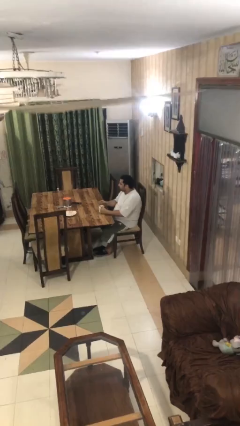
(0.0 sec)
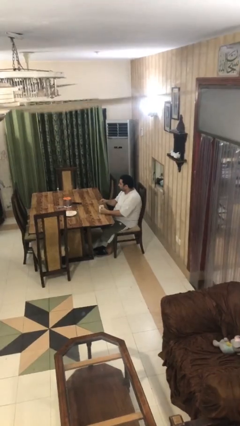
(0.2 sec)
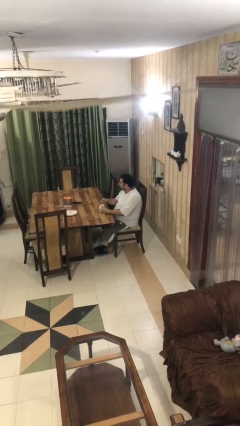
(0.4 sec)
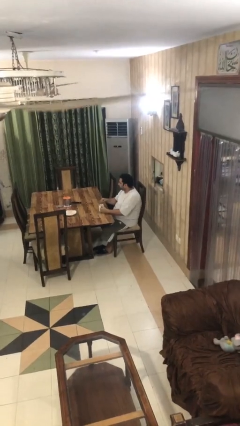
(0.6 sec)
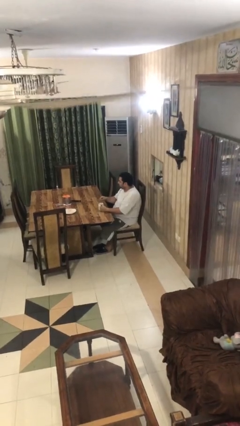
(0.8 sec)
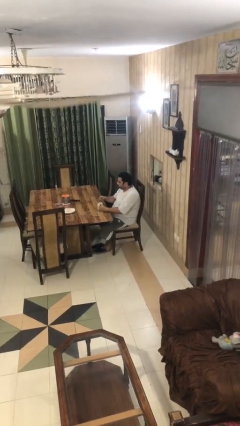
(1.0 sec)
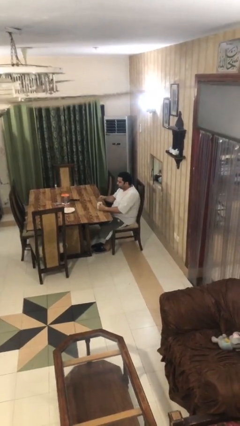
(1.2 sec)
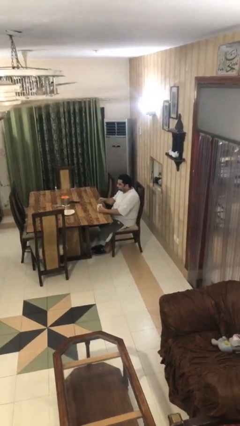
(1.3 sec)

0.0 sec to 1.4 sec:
person stirs mug

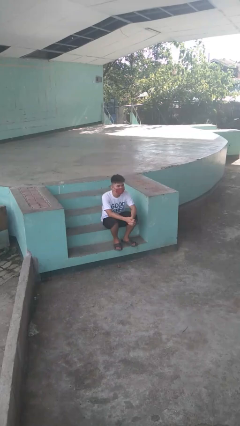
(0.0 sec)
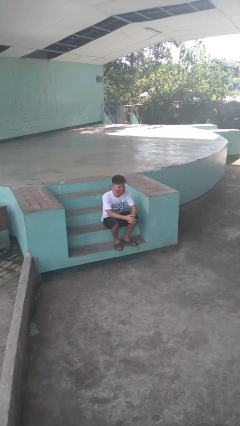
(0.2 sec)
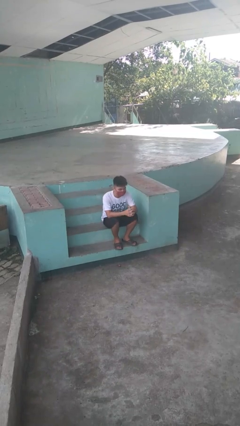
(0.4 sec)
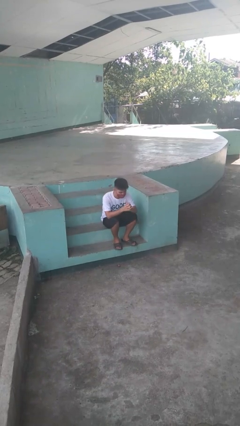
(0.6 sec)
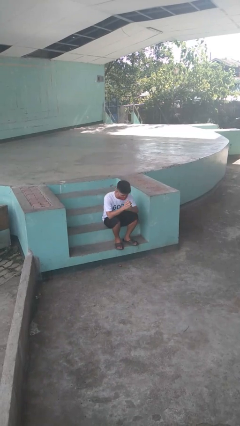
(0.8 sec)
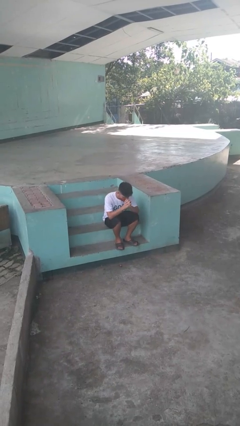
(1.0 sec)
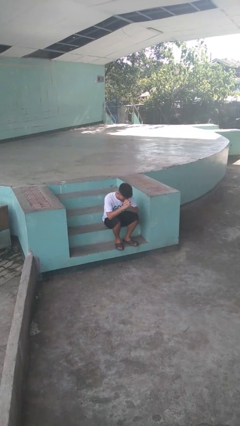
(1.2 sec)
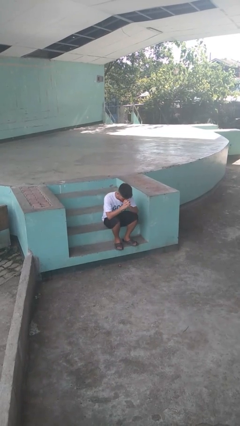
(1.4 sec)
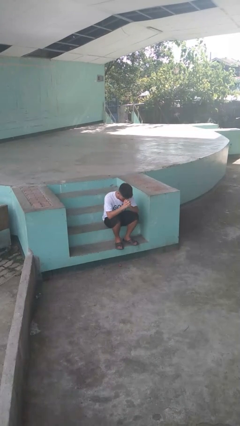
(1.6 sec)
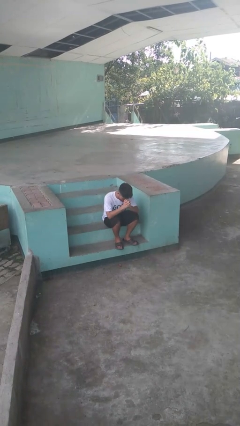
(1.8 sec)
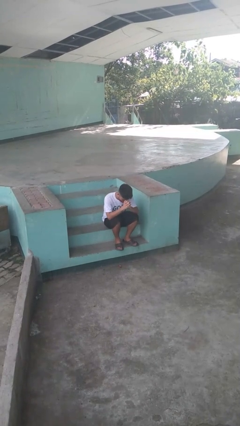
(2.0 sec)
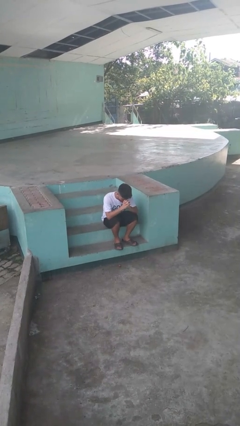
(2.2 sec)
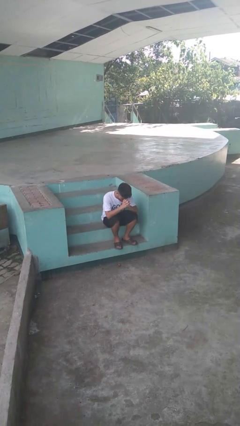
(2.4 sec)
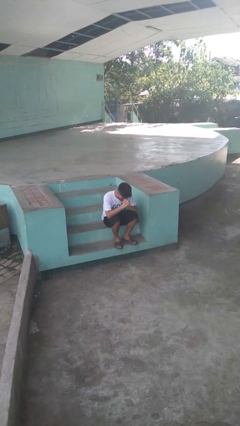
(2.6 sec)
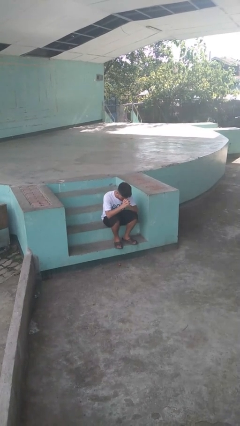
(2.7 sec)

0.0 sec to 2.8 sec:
person prays

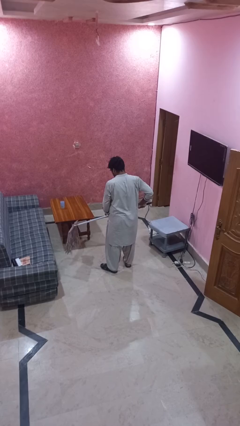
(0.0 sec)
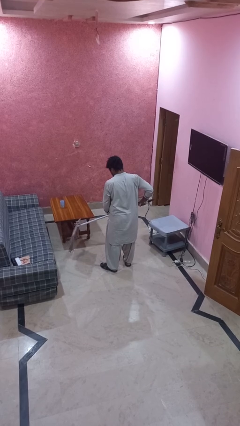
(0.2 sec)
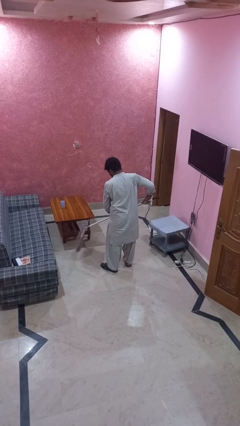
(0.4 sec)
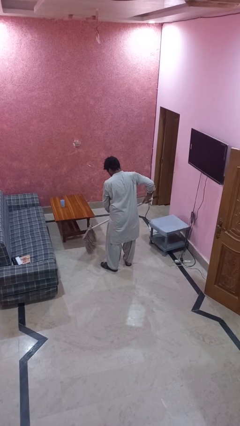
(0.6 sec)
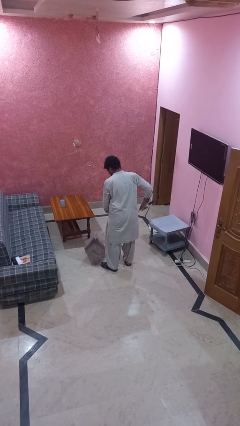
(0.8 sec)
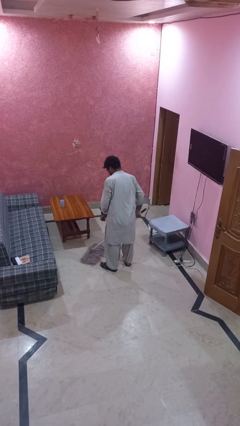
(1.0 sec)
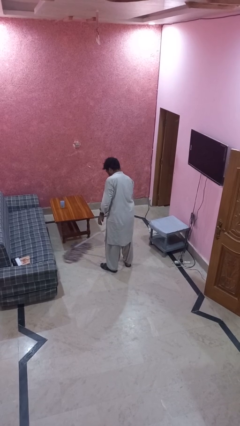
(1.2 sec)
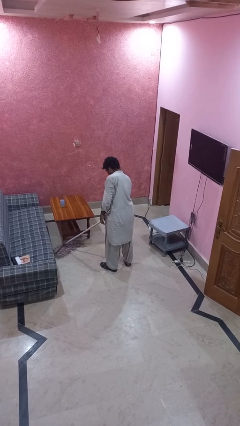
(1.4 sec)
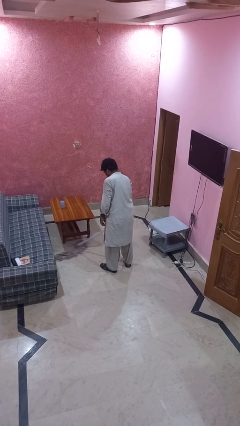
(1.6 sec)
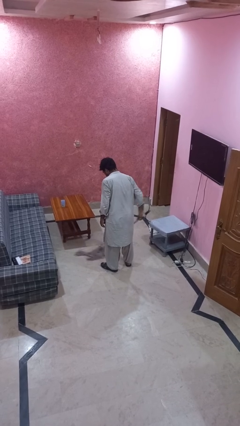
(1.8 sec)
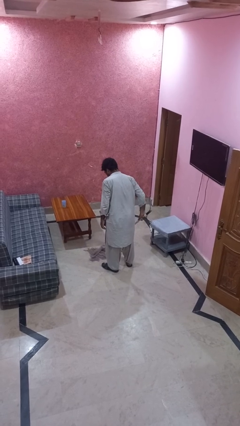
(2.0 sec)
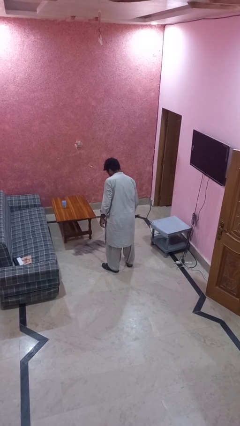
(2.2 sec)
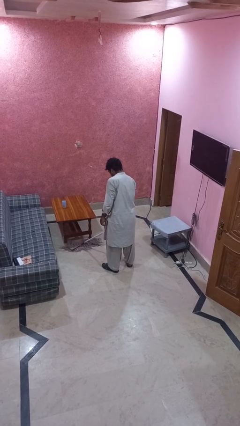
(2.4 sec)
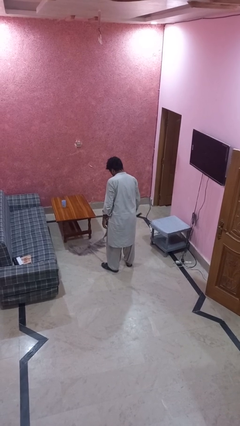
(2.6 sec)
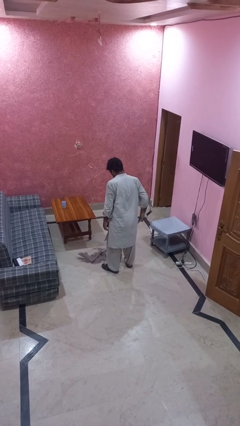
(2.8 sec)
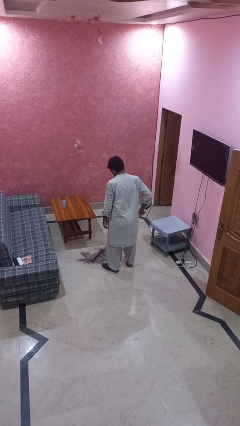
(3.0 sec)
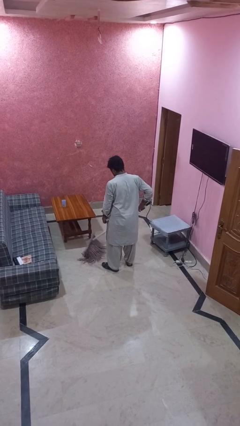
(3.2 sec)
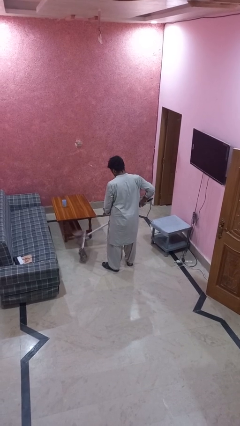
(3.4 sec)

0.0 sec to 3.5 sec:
person mops

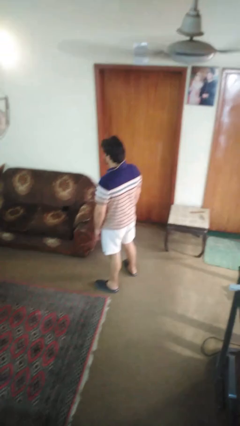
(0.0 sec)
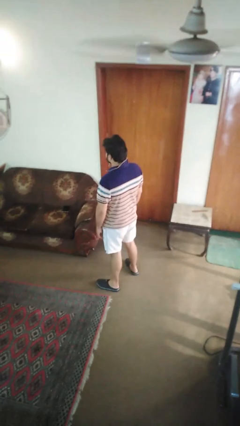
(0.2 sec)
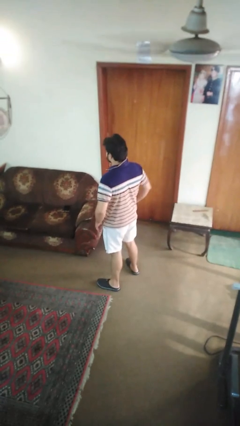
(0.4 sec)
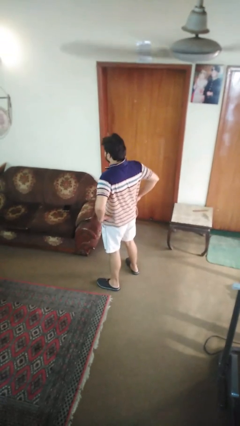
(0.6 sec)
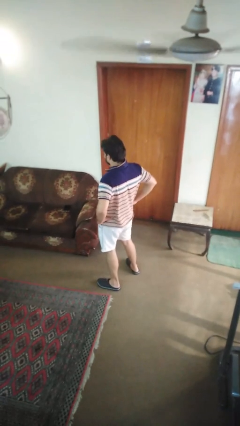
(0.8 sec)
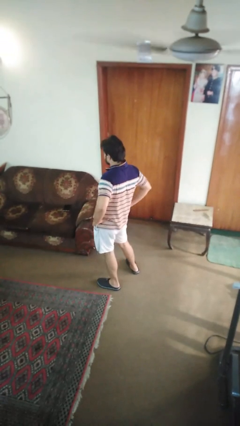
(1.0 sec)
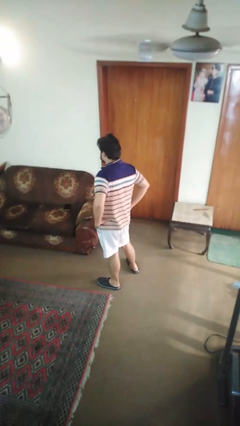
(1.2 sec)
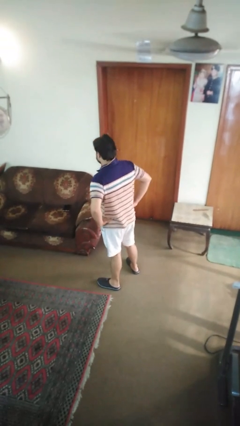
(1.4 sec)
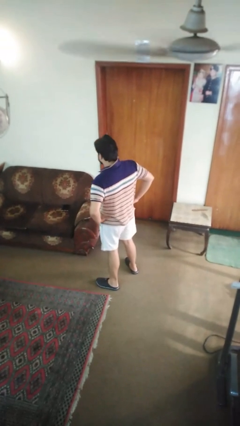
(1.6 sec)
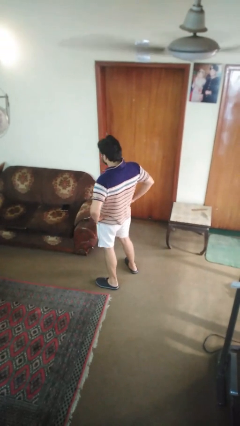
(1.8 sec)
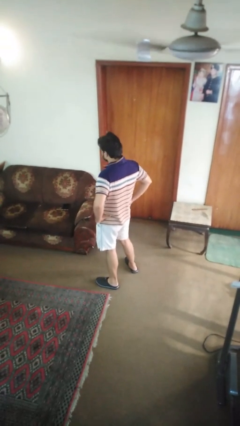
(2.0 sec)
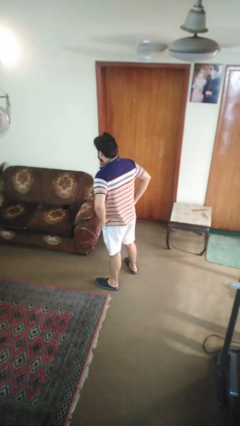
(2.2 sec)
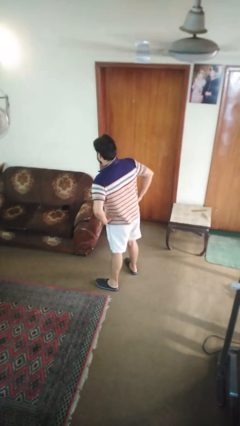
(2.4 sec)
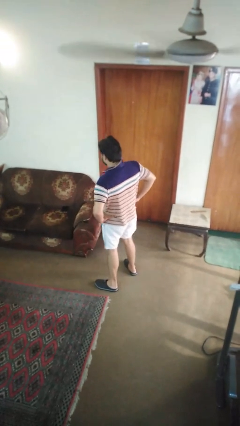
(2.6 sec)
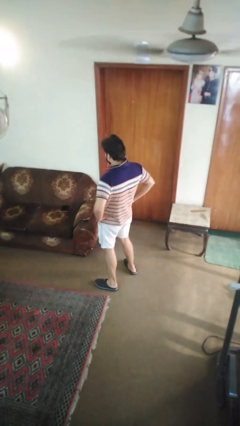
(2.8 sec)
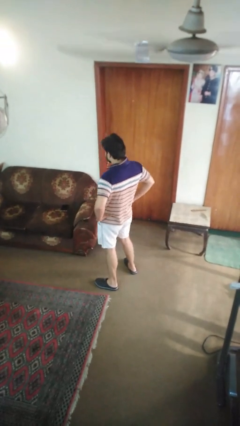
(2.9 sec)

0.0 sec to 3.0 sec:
person wiggles hips

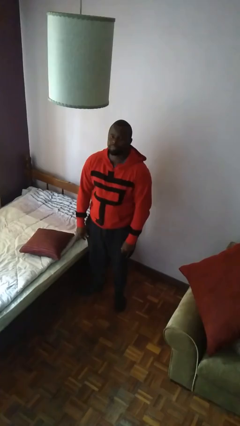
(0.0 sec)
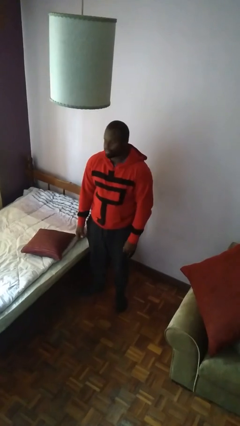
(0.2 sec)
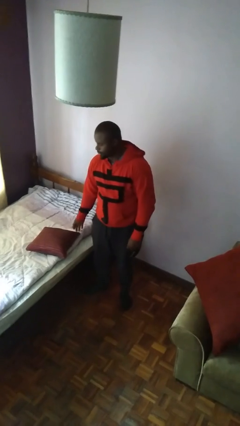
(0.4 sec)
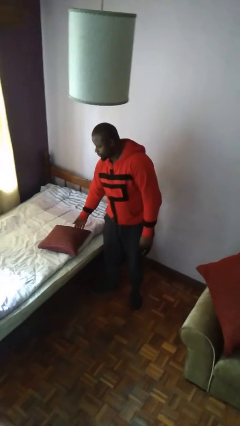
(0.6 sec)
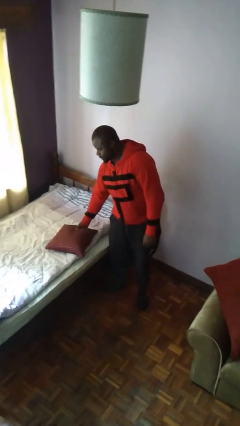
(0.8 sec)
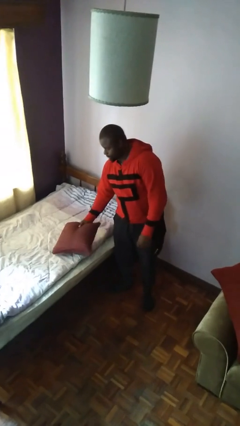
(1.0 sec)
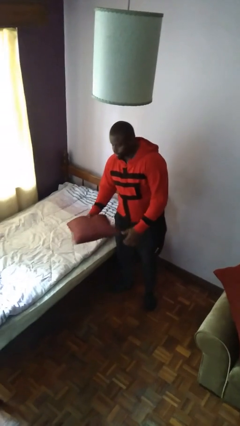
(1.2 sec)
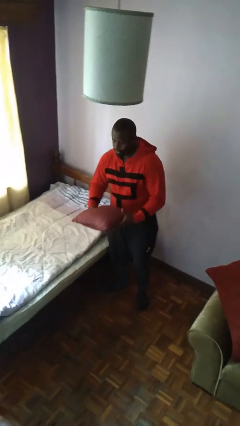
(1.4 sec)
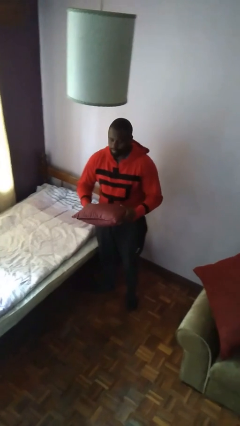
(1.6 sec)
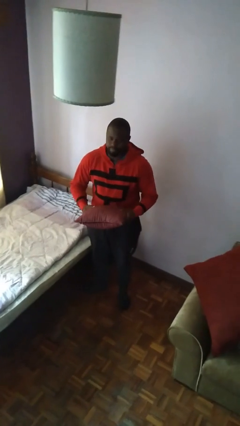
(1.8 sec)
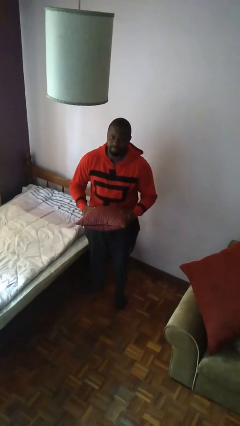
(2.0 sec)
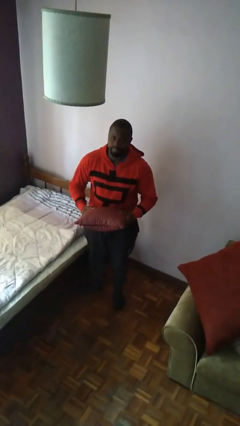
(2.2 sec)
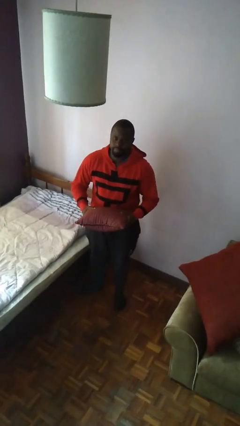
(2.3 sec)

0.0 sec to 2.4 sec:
person picks up object from bed

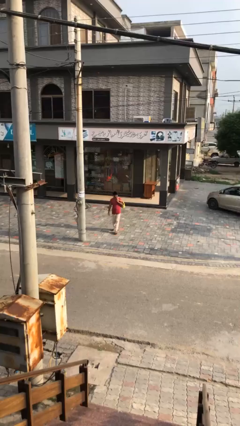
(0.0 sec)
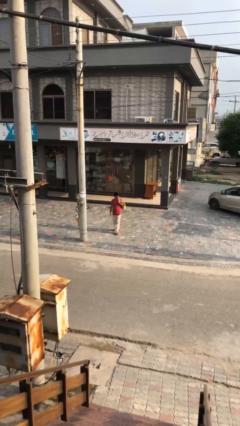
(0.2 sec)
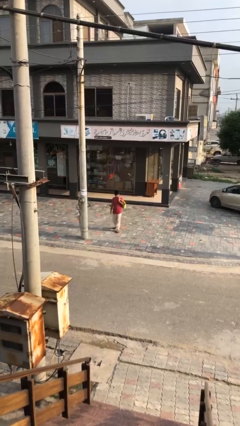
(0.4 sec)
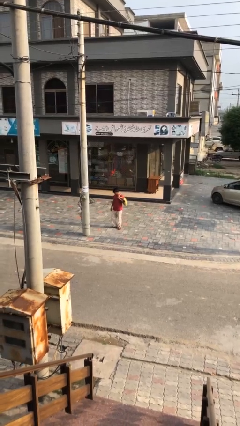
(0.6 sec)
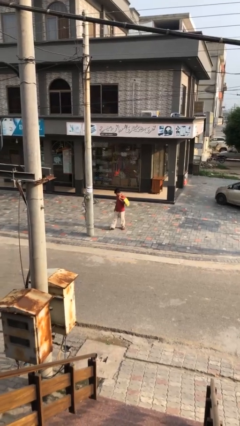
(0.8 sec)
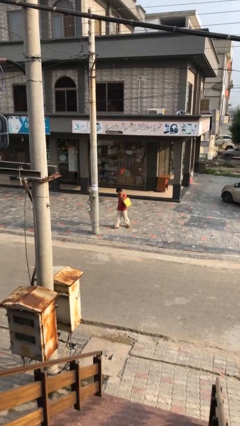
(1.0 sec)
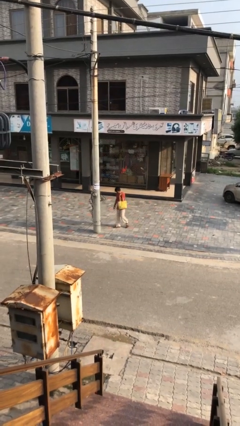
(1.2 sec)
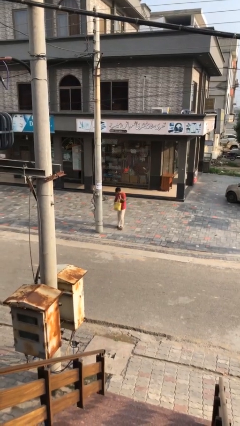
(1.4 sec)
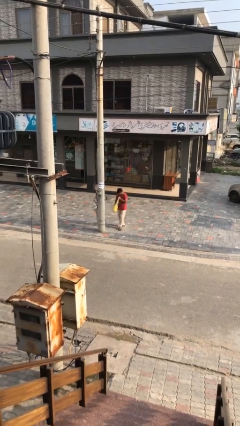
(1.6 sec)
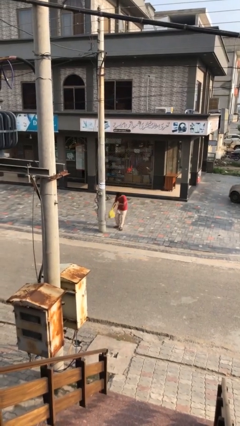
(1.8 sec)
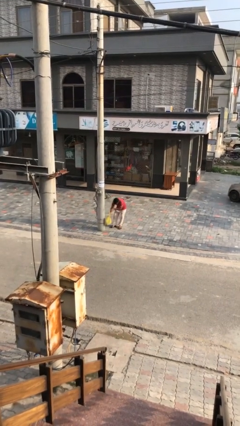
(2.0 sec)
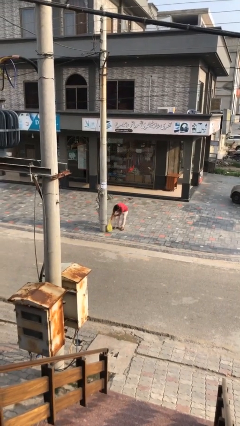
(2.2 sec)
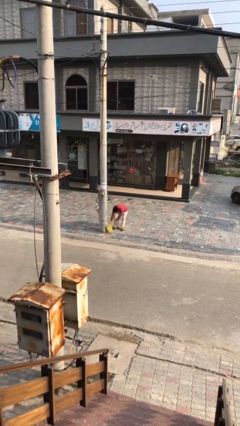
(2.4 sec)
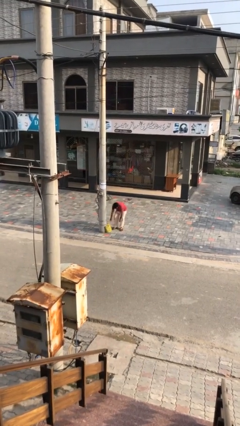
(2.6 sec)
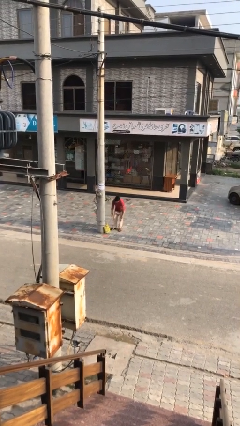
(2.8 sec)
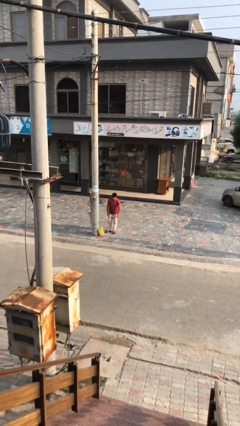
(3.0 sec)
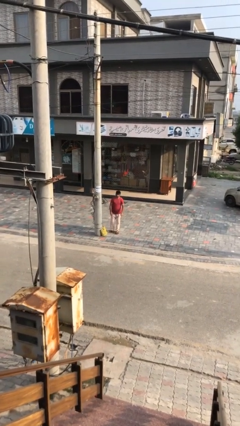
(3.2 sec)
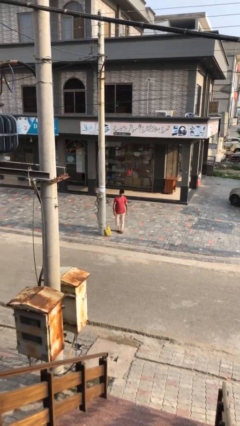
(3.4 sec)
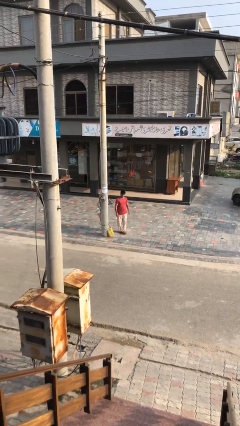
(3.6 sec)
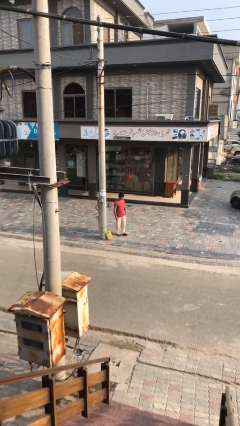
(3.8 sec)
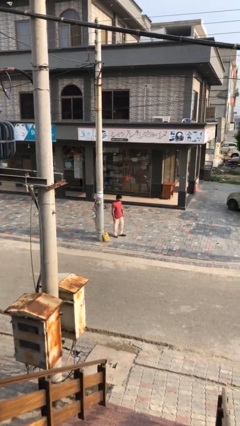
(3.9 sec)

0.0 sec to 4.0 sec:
person puts down object on floor

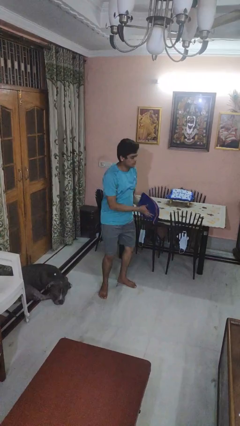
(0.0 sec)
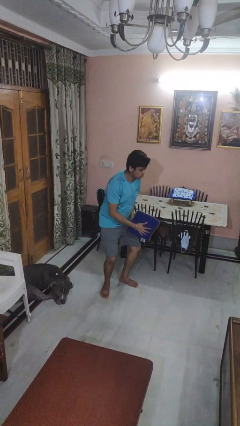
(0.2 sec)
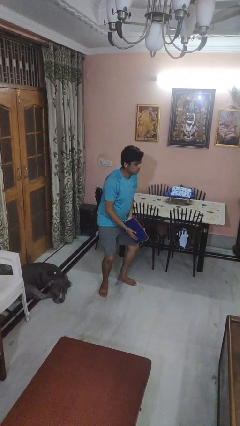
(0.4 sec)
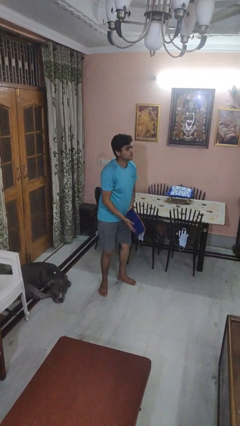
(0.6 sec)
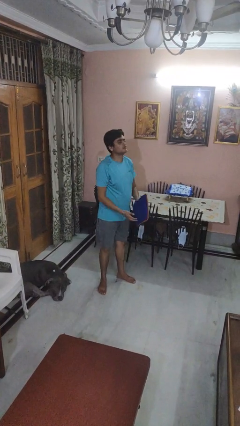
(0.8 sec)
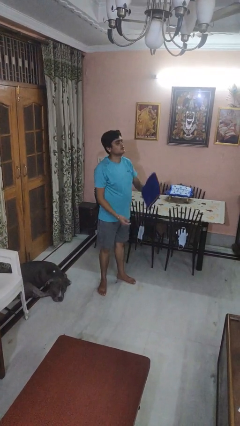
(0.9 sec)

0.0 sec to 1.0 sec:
person catches dropped object
